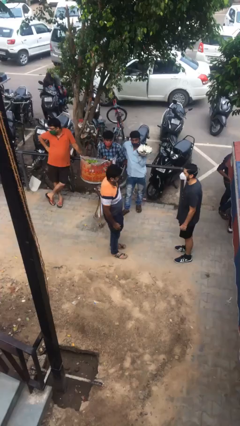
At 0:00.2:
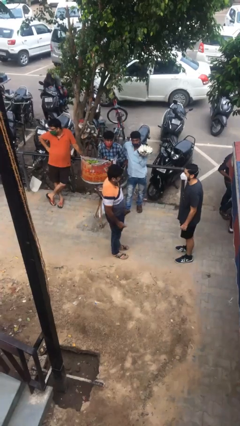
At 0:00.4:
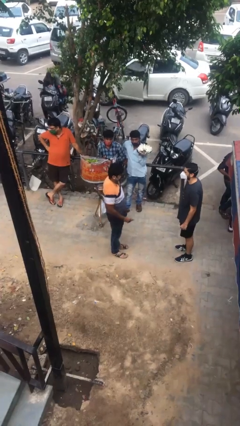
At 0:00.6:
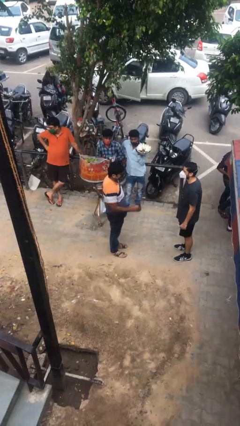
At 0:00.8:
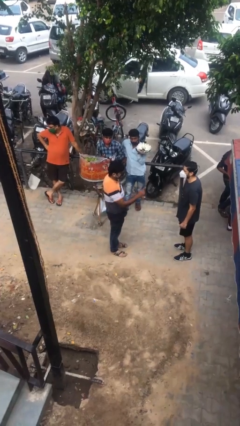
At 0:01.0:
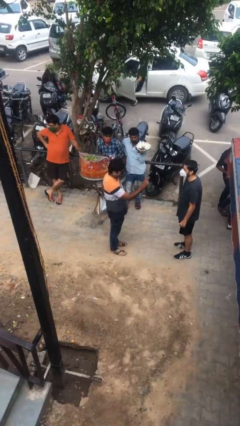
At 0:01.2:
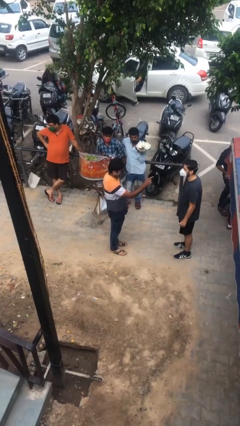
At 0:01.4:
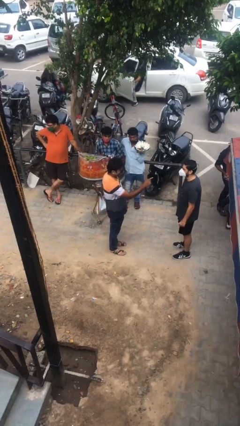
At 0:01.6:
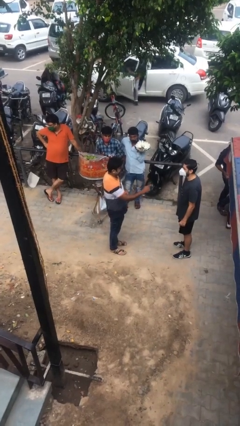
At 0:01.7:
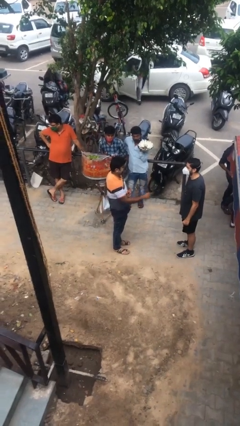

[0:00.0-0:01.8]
person points at person

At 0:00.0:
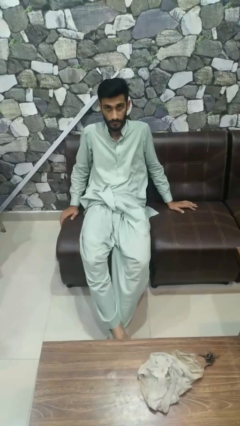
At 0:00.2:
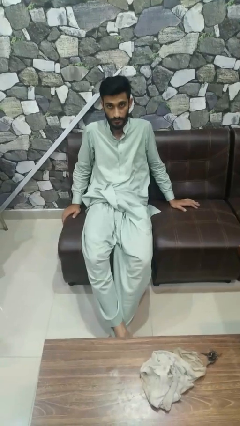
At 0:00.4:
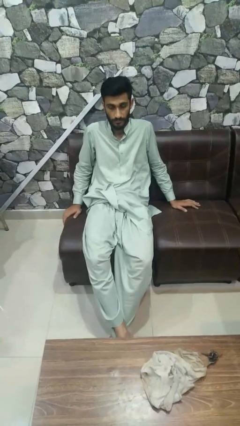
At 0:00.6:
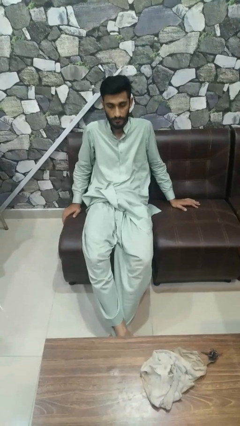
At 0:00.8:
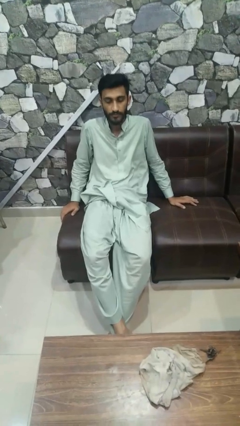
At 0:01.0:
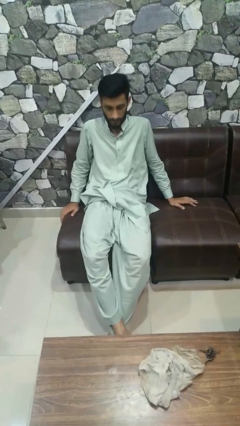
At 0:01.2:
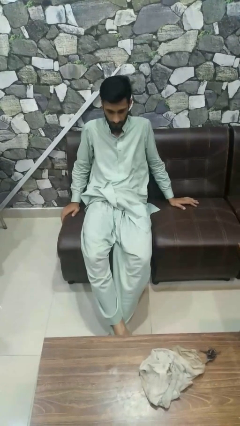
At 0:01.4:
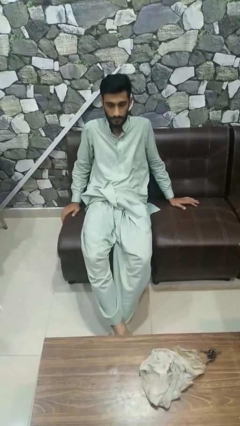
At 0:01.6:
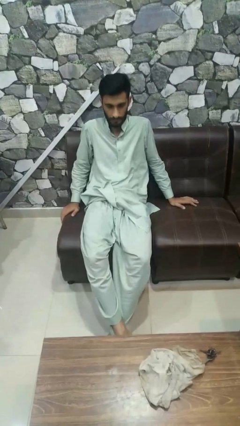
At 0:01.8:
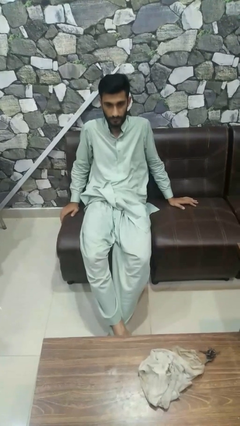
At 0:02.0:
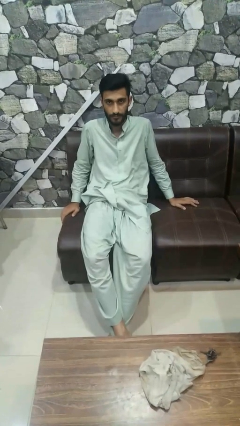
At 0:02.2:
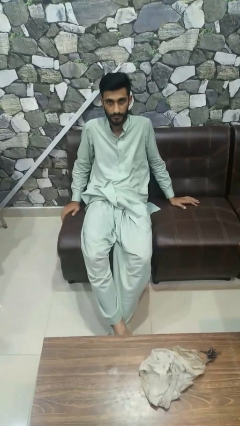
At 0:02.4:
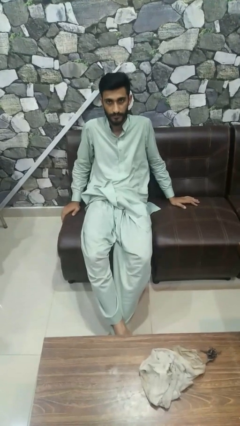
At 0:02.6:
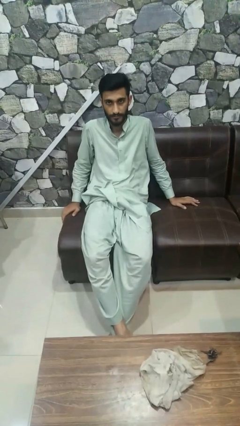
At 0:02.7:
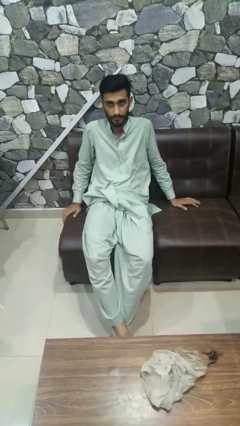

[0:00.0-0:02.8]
person nods head

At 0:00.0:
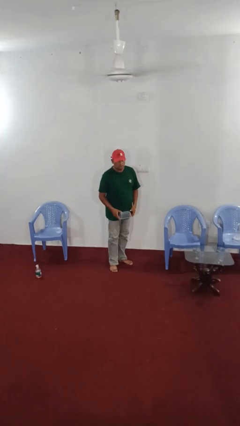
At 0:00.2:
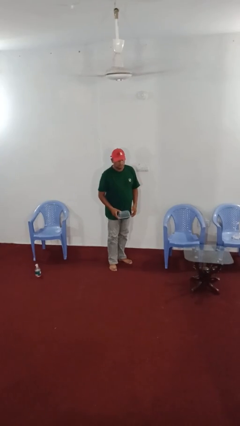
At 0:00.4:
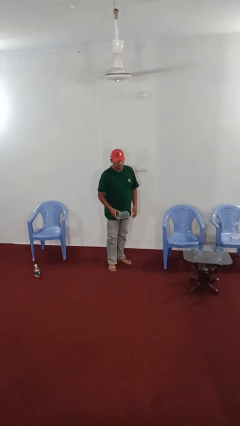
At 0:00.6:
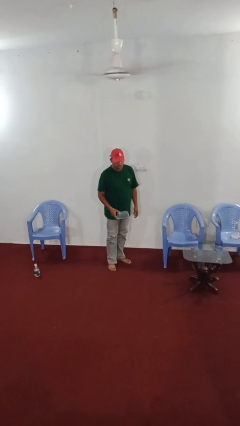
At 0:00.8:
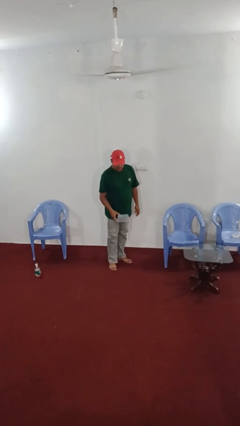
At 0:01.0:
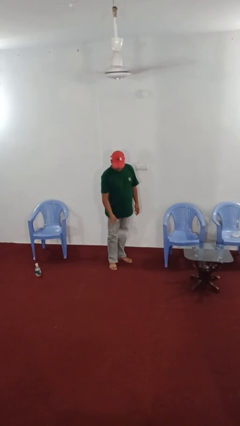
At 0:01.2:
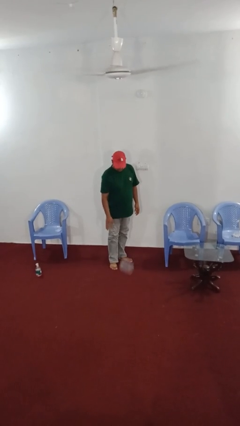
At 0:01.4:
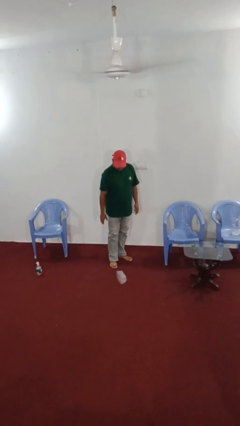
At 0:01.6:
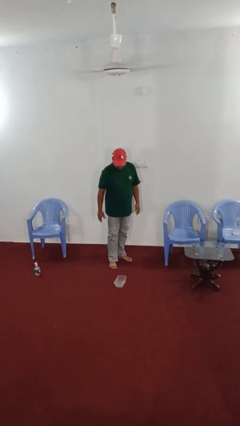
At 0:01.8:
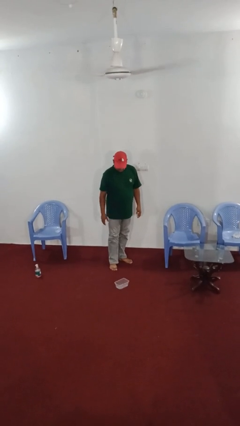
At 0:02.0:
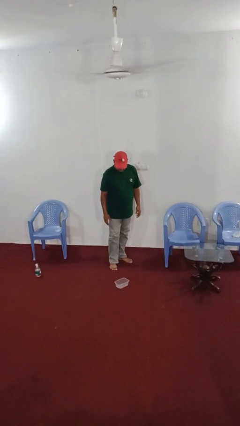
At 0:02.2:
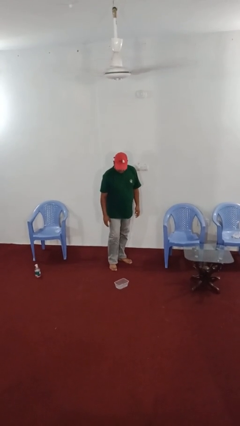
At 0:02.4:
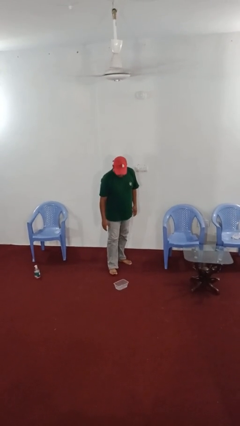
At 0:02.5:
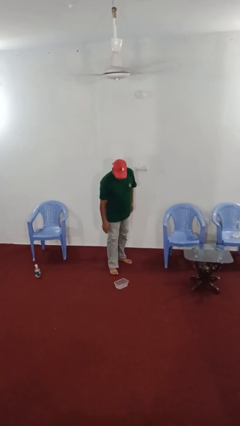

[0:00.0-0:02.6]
person throws object to ground

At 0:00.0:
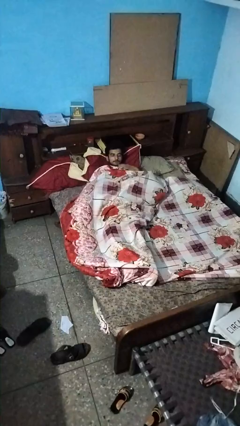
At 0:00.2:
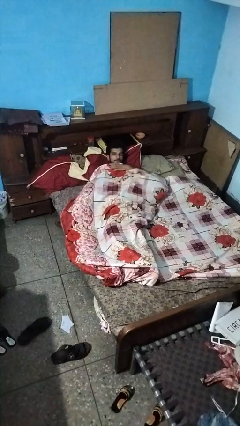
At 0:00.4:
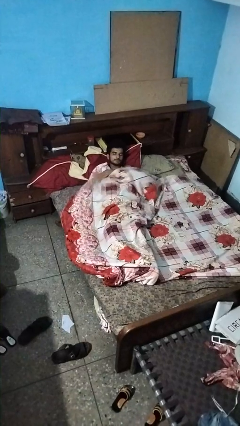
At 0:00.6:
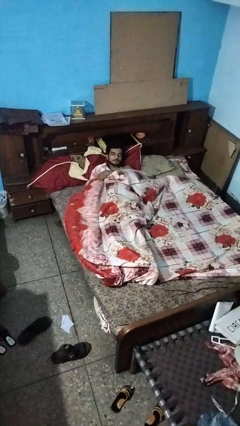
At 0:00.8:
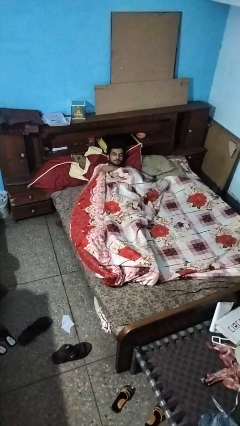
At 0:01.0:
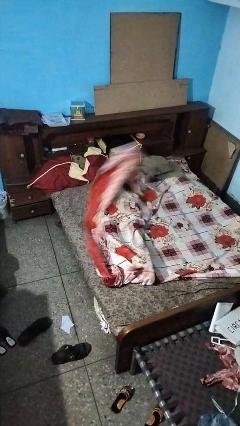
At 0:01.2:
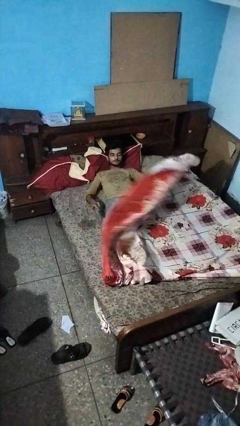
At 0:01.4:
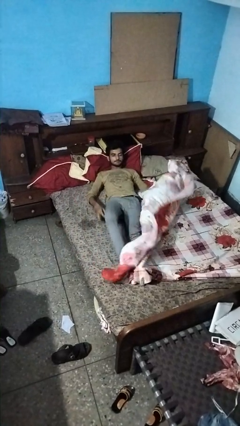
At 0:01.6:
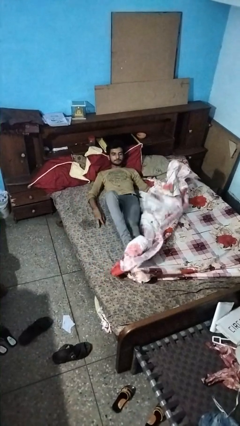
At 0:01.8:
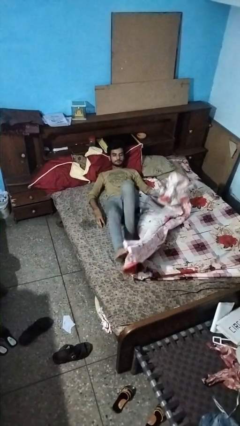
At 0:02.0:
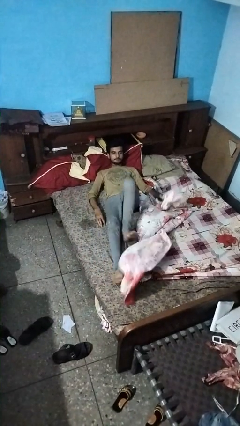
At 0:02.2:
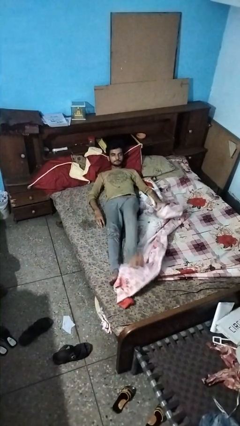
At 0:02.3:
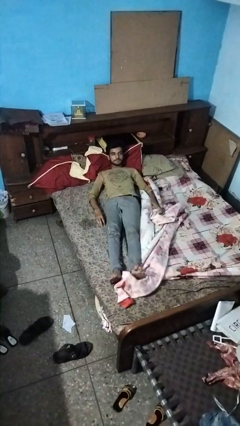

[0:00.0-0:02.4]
person uncovers with bedsheets

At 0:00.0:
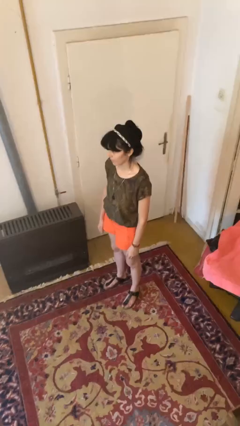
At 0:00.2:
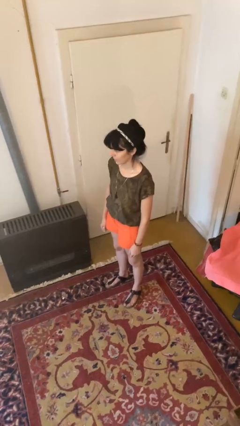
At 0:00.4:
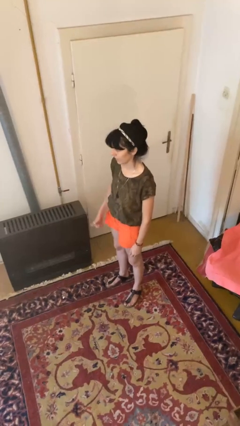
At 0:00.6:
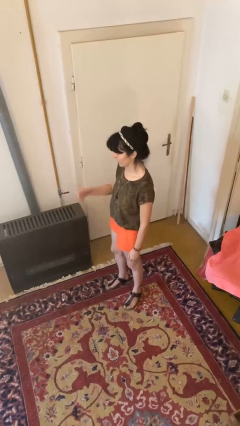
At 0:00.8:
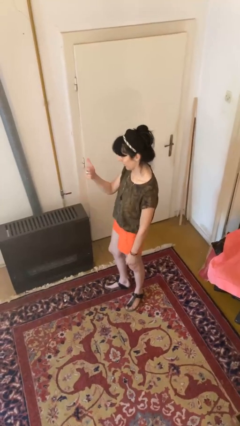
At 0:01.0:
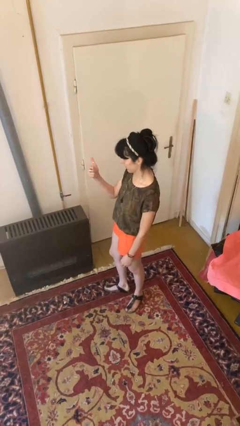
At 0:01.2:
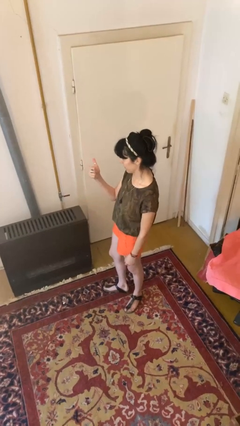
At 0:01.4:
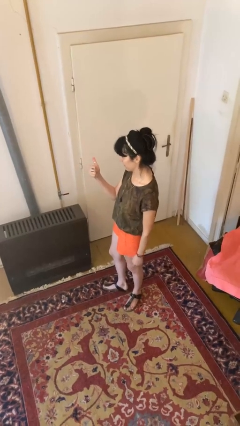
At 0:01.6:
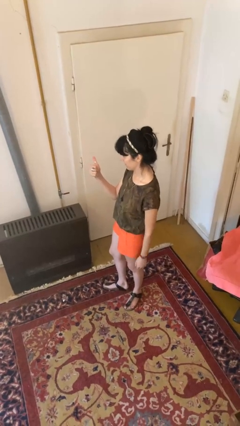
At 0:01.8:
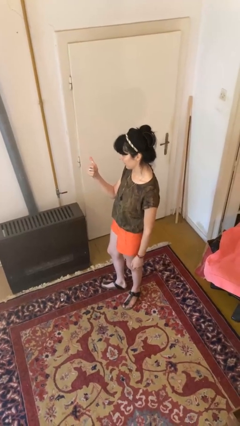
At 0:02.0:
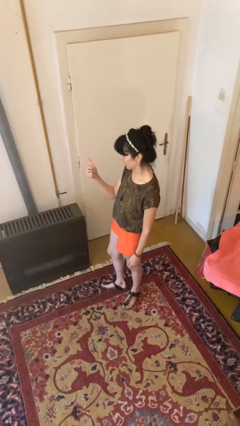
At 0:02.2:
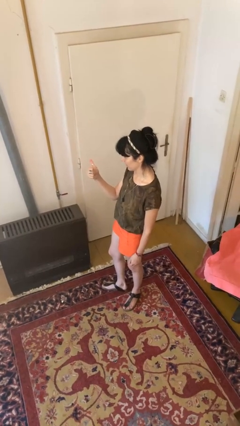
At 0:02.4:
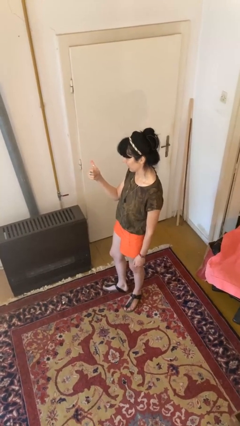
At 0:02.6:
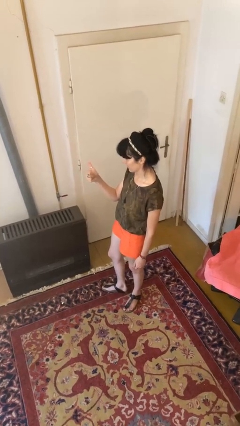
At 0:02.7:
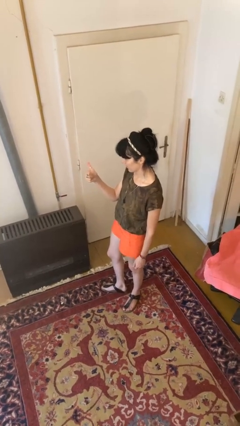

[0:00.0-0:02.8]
person gestures thumbs up

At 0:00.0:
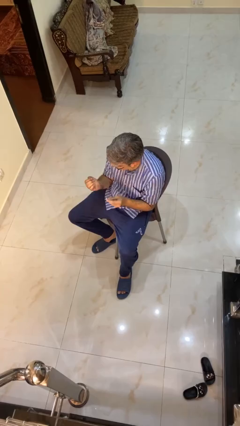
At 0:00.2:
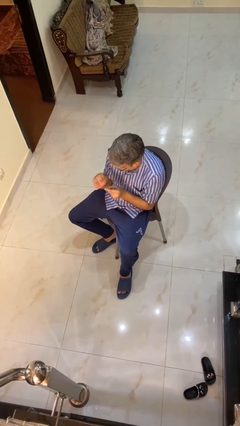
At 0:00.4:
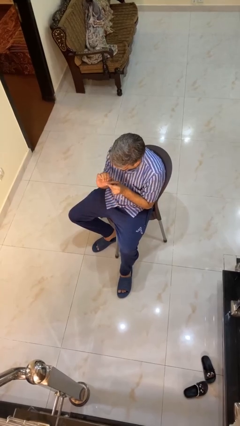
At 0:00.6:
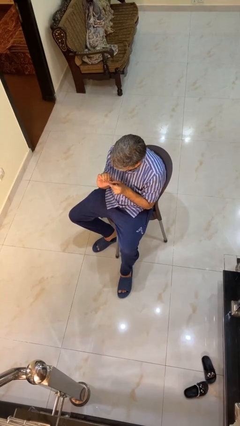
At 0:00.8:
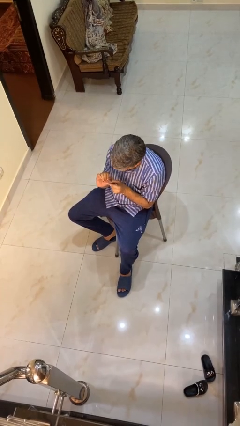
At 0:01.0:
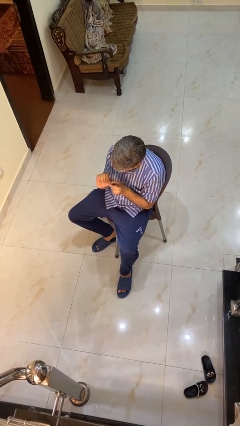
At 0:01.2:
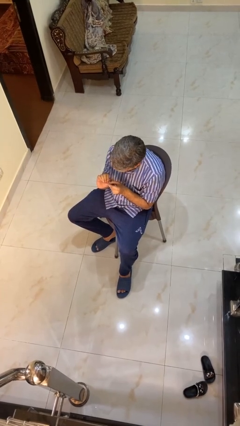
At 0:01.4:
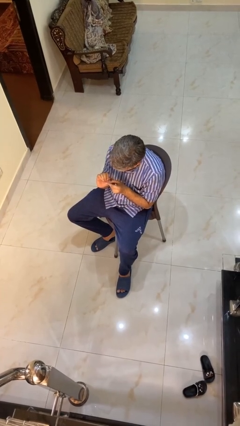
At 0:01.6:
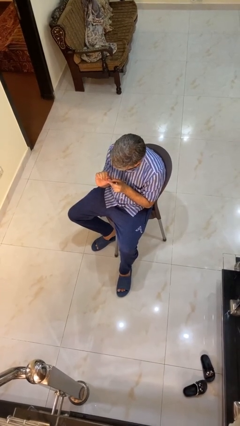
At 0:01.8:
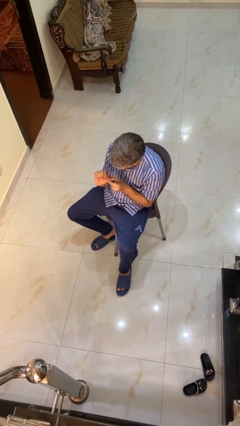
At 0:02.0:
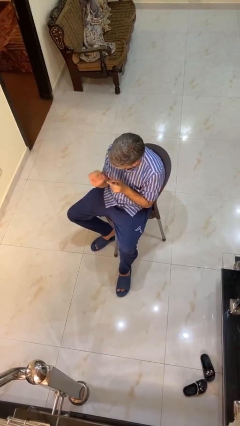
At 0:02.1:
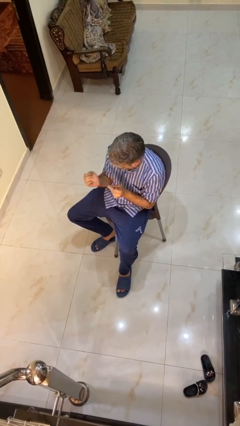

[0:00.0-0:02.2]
person files fingernails

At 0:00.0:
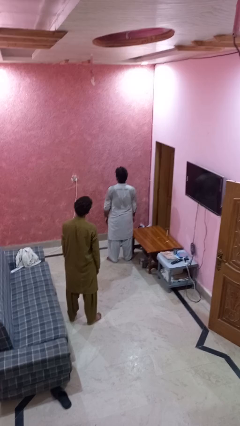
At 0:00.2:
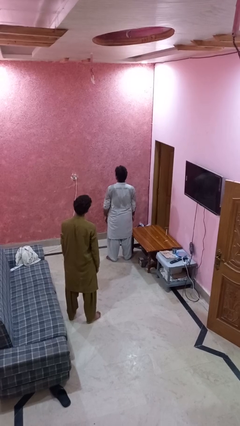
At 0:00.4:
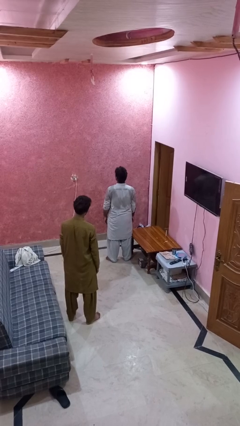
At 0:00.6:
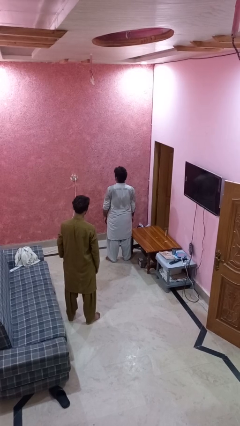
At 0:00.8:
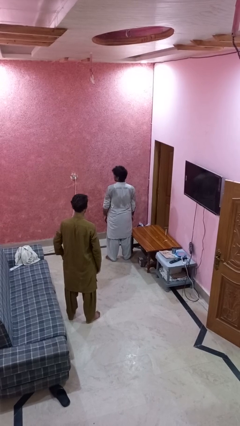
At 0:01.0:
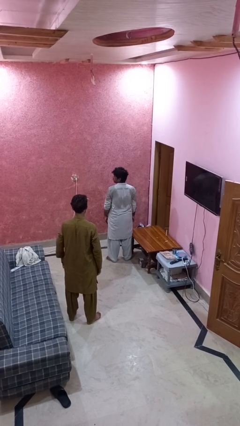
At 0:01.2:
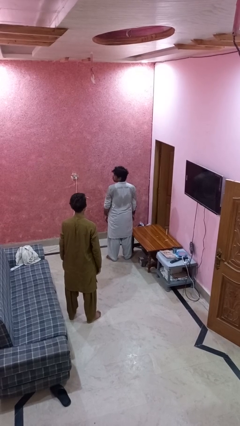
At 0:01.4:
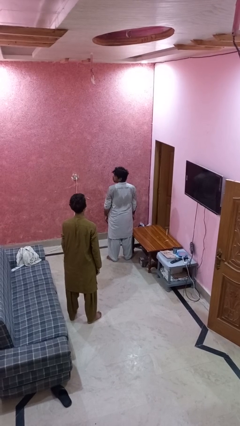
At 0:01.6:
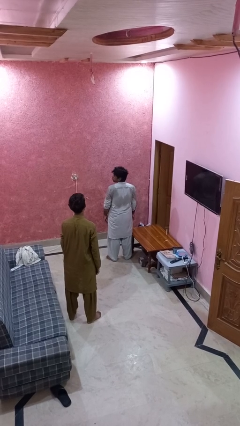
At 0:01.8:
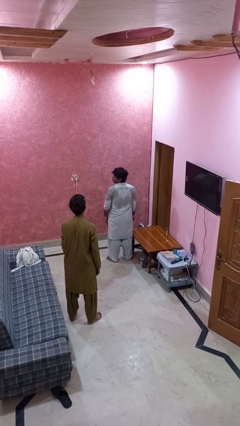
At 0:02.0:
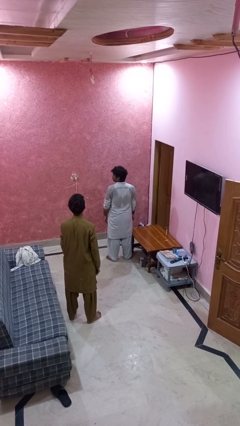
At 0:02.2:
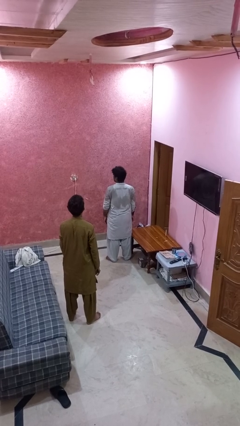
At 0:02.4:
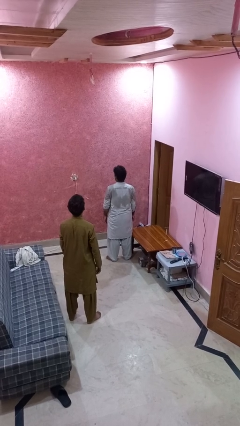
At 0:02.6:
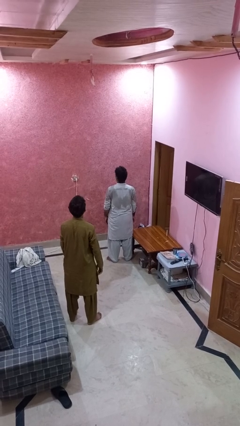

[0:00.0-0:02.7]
person looks over shoulder
